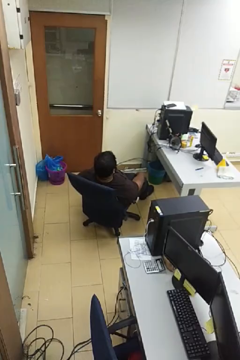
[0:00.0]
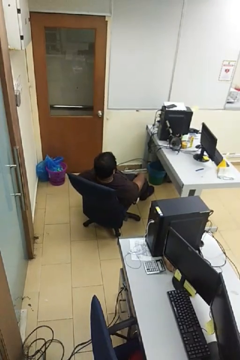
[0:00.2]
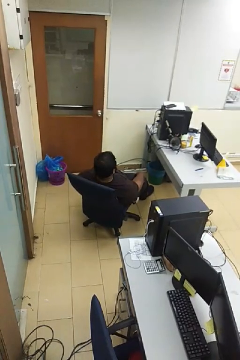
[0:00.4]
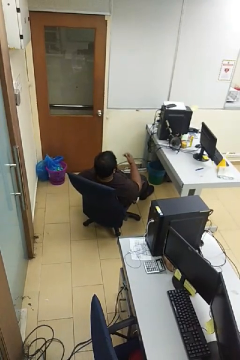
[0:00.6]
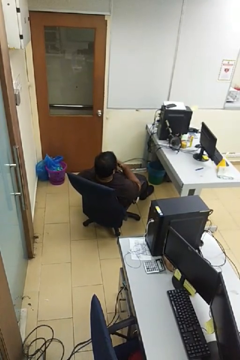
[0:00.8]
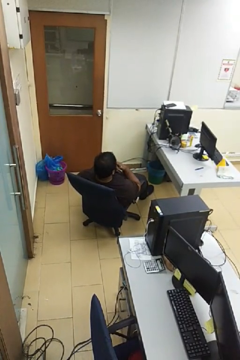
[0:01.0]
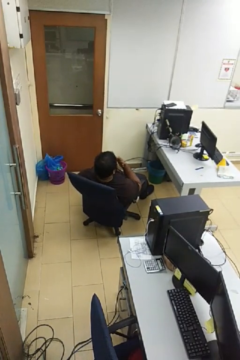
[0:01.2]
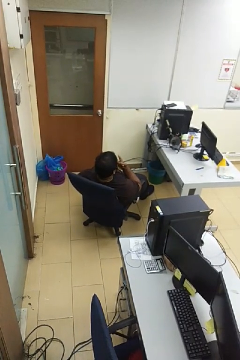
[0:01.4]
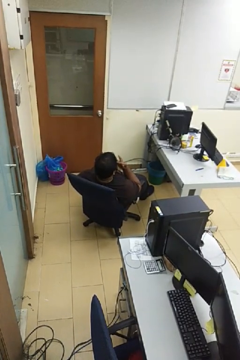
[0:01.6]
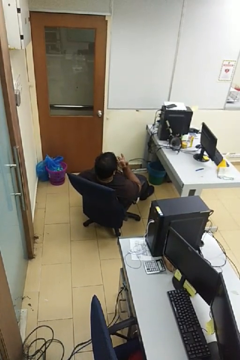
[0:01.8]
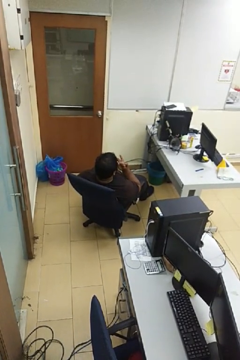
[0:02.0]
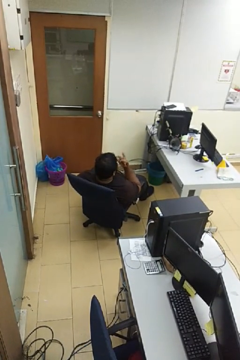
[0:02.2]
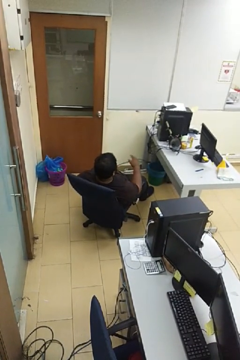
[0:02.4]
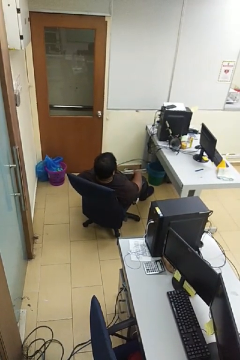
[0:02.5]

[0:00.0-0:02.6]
person licks fingers

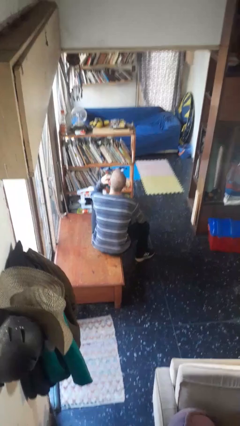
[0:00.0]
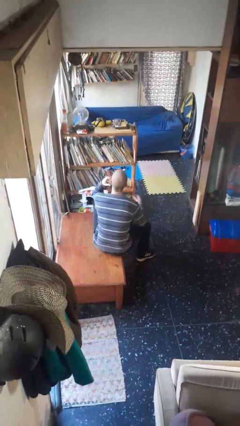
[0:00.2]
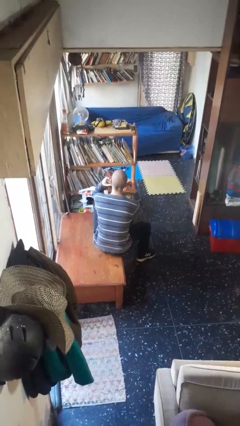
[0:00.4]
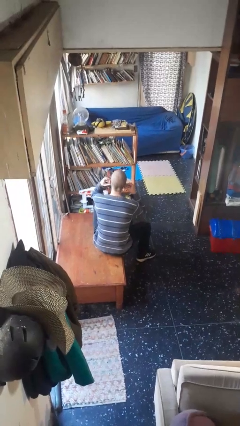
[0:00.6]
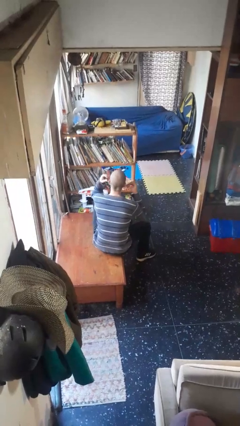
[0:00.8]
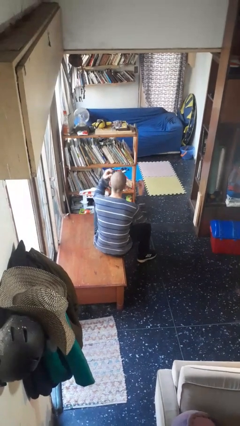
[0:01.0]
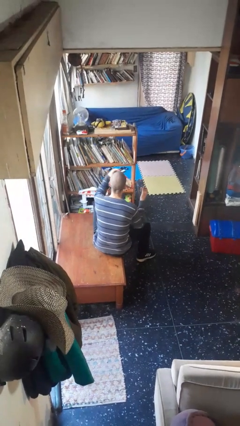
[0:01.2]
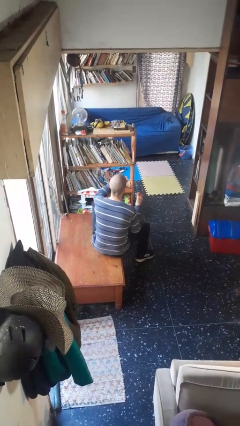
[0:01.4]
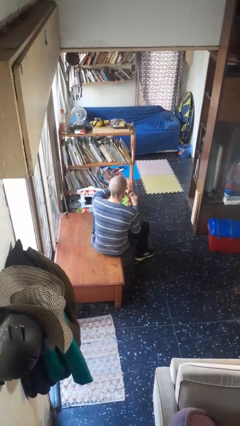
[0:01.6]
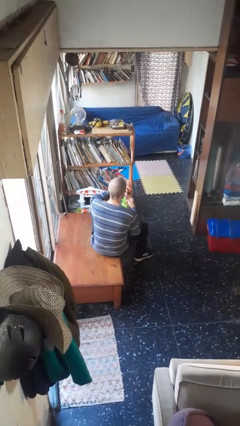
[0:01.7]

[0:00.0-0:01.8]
person takes off headphones

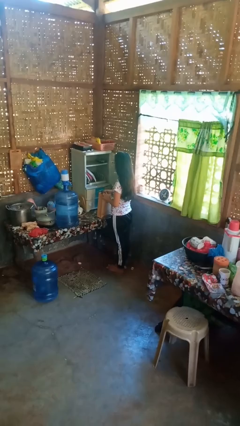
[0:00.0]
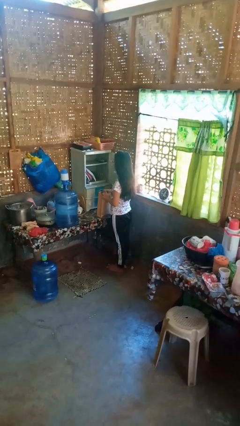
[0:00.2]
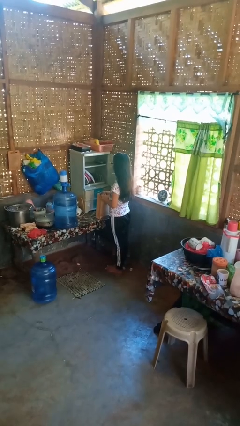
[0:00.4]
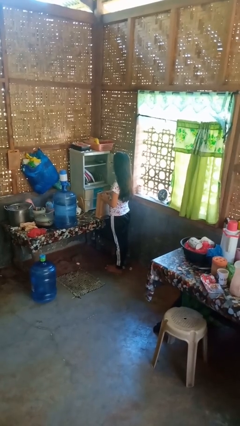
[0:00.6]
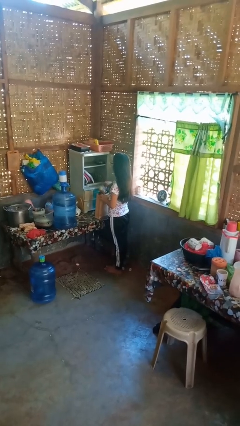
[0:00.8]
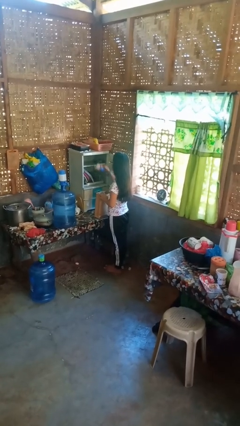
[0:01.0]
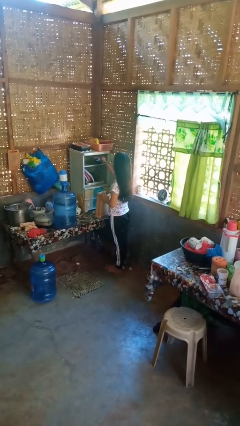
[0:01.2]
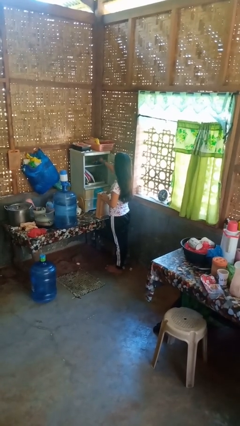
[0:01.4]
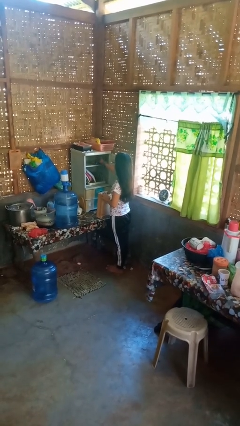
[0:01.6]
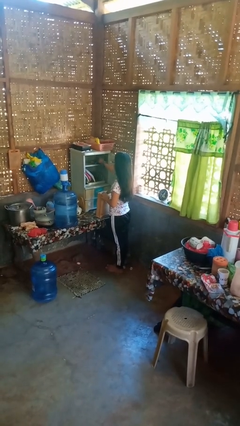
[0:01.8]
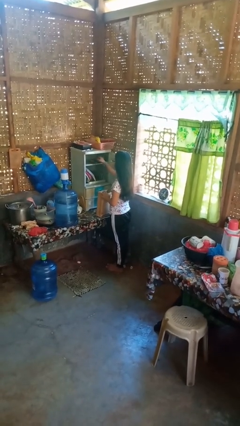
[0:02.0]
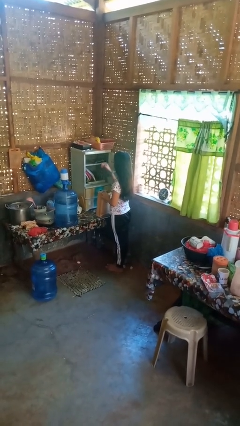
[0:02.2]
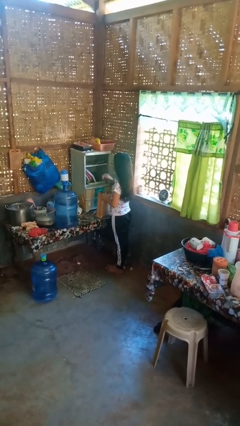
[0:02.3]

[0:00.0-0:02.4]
person loads groceries into cabinet

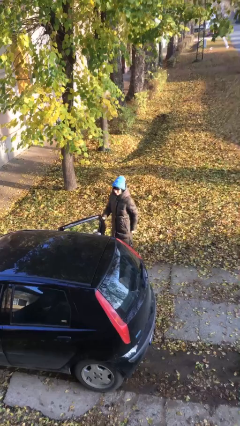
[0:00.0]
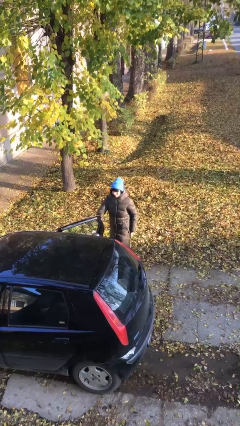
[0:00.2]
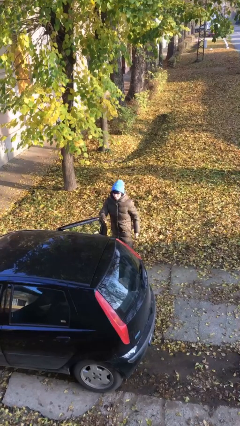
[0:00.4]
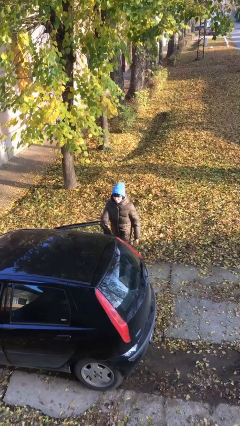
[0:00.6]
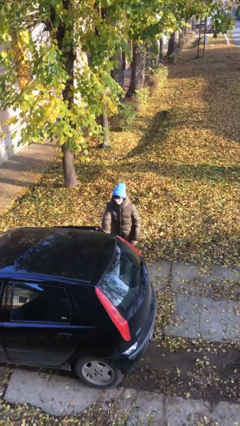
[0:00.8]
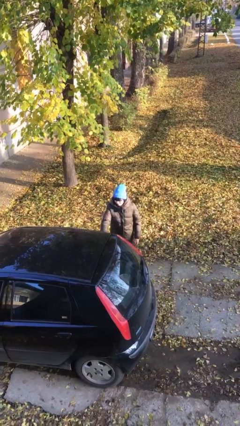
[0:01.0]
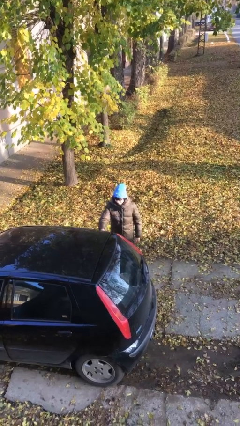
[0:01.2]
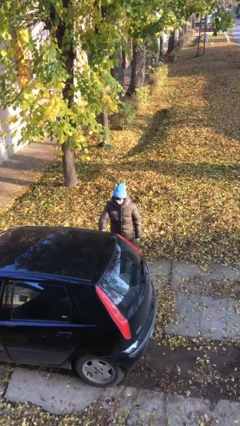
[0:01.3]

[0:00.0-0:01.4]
person closes car door

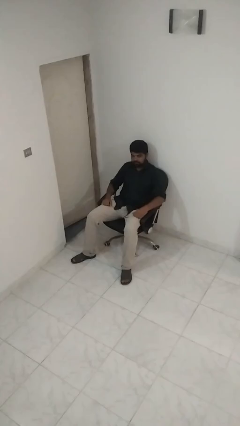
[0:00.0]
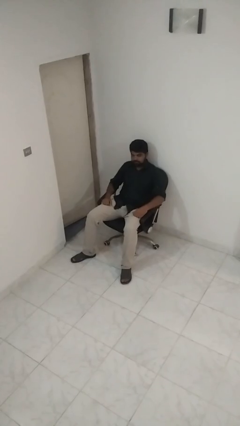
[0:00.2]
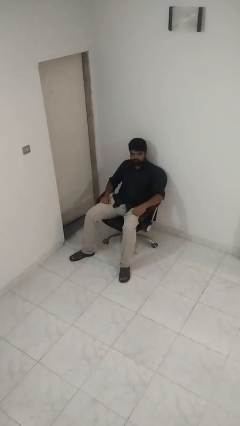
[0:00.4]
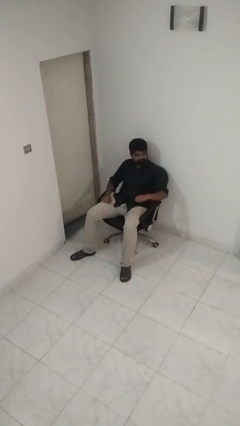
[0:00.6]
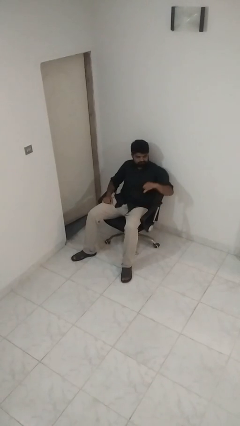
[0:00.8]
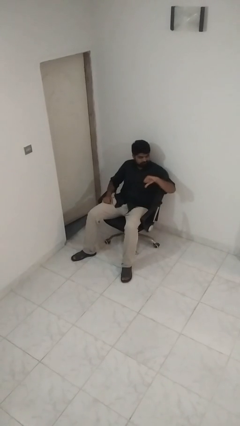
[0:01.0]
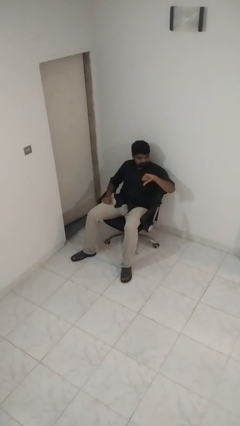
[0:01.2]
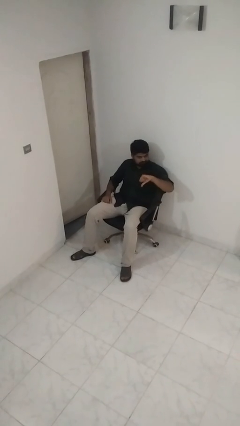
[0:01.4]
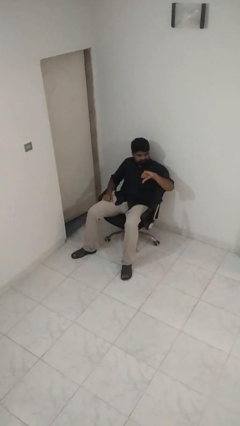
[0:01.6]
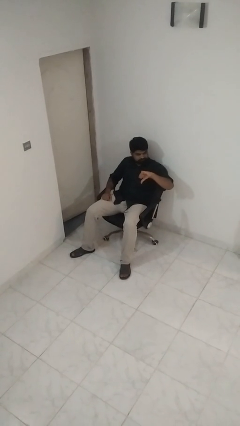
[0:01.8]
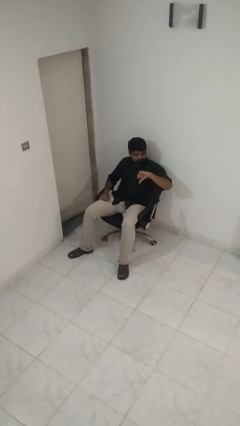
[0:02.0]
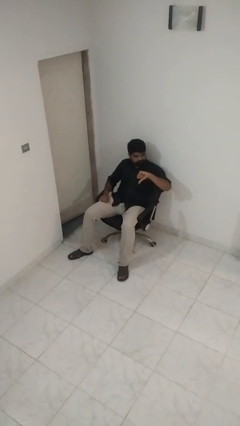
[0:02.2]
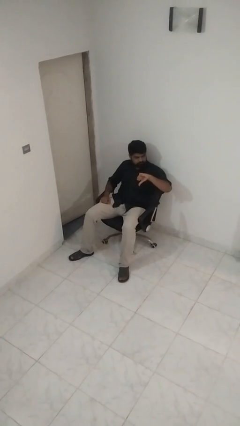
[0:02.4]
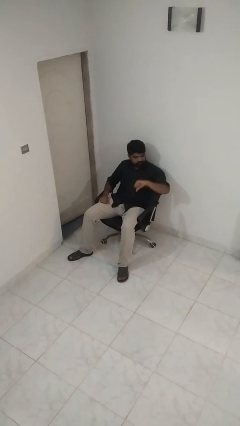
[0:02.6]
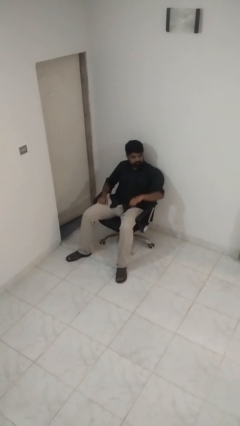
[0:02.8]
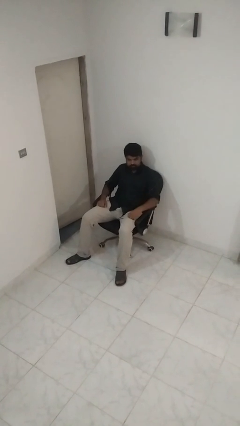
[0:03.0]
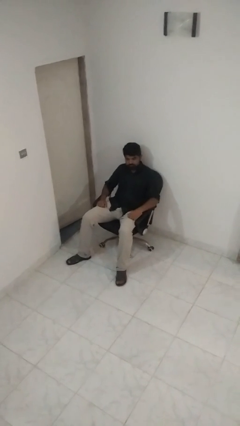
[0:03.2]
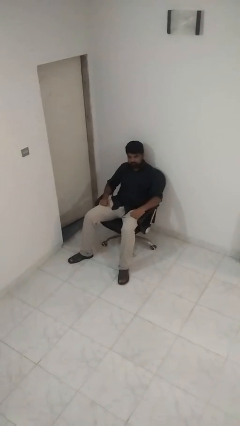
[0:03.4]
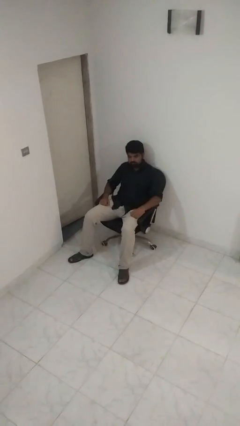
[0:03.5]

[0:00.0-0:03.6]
person gestures thumbs down

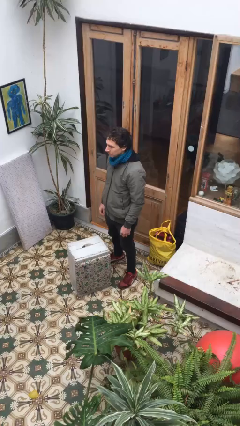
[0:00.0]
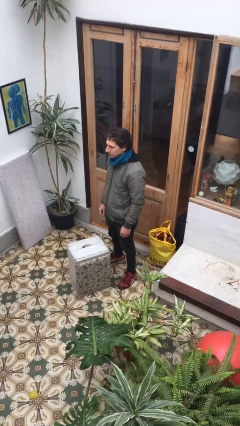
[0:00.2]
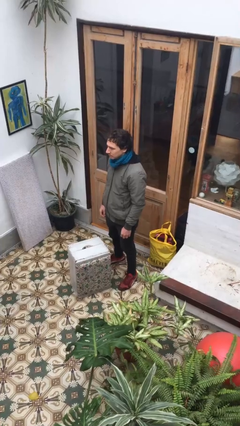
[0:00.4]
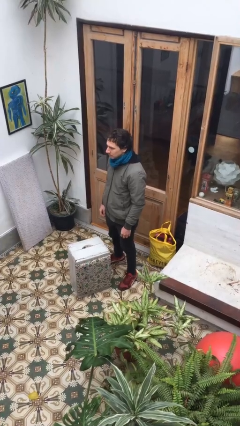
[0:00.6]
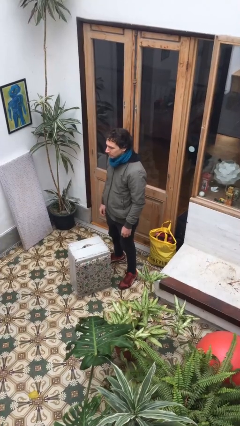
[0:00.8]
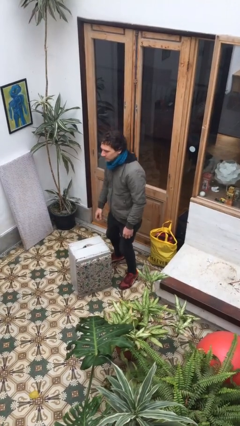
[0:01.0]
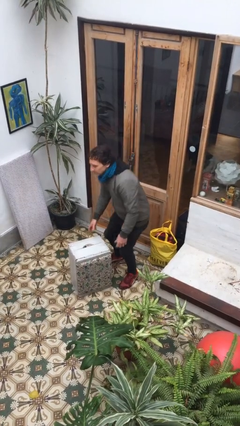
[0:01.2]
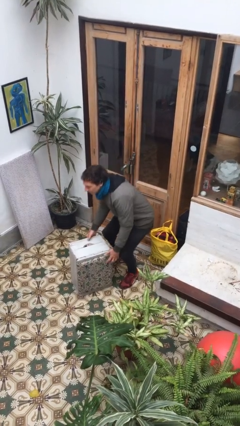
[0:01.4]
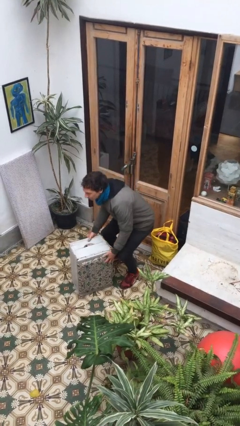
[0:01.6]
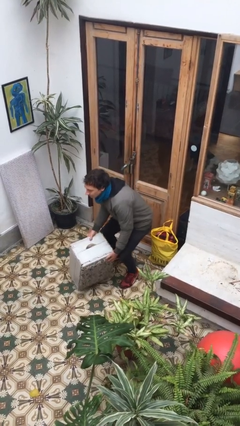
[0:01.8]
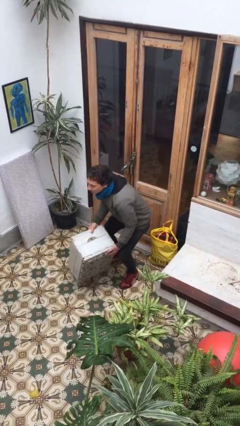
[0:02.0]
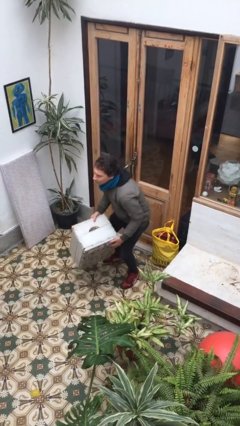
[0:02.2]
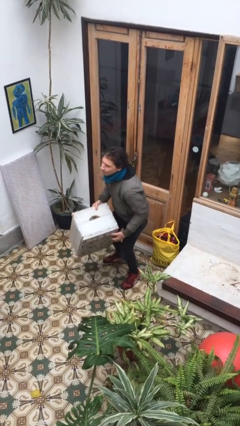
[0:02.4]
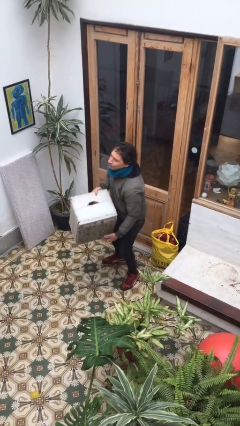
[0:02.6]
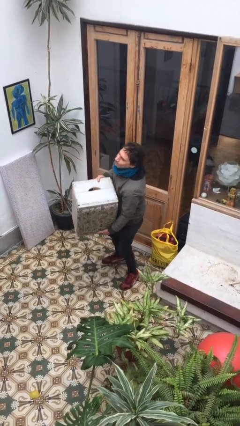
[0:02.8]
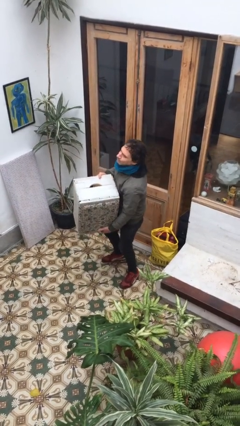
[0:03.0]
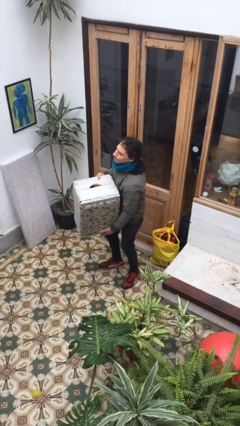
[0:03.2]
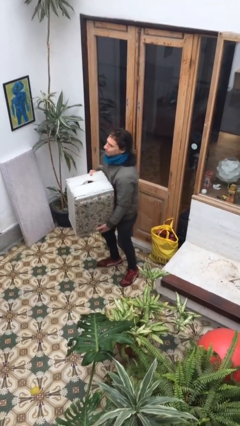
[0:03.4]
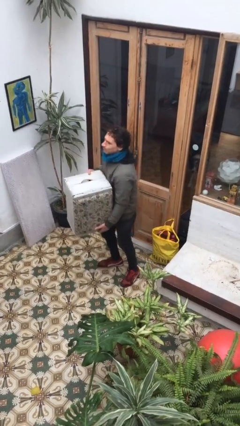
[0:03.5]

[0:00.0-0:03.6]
person picks up object from floor

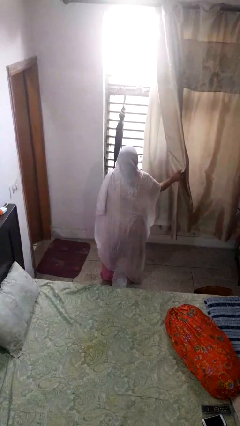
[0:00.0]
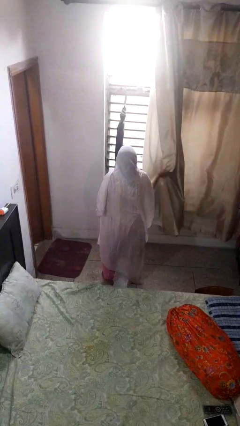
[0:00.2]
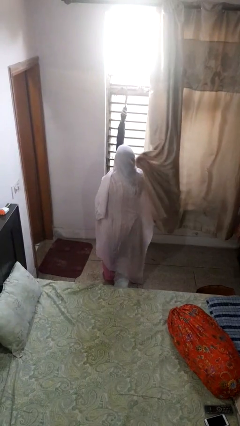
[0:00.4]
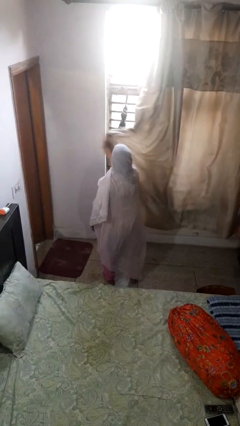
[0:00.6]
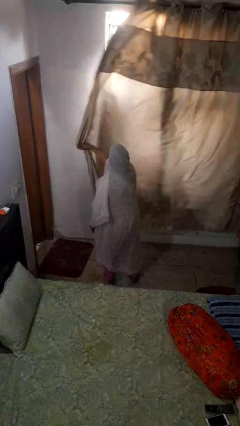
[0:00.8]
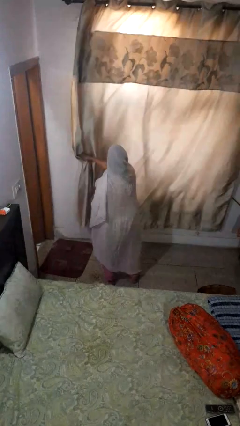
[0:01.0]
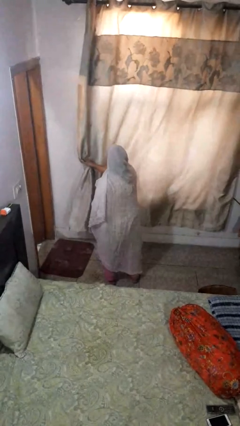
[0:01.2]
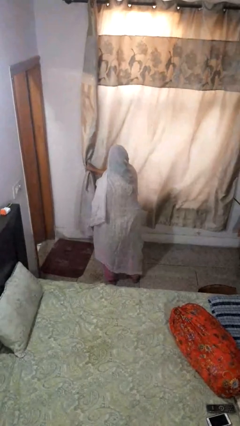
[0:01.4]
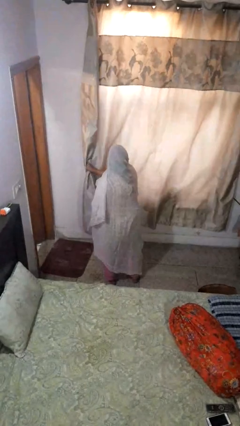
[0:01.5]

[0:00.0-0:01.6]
person closes curtains
